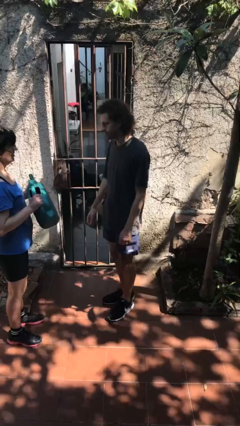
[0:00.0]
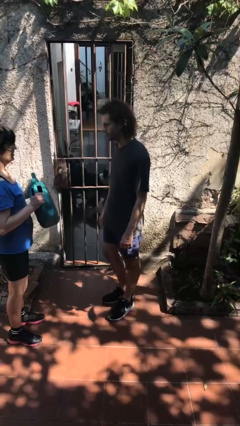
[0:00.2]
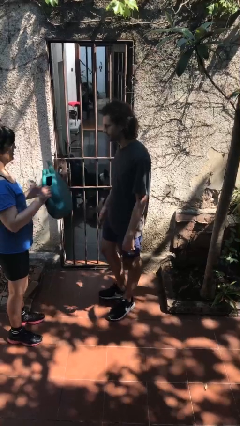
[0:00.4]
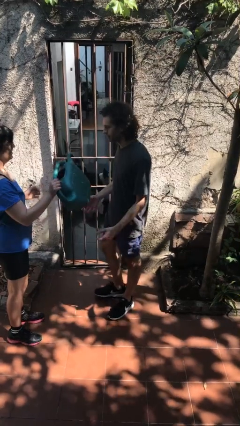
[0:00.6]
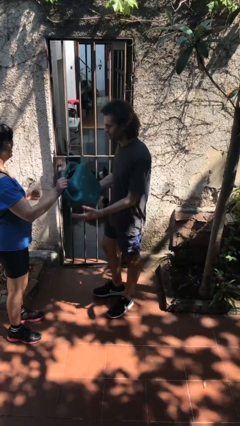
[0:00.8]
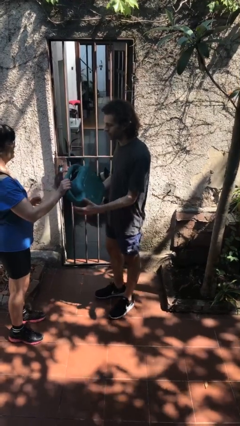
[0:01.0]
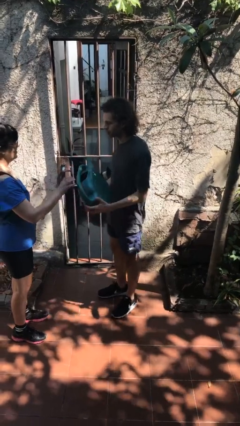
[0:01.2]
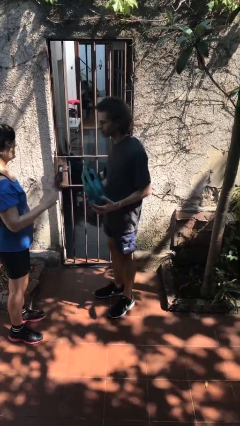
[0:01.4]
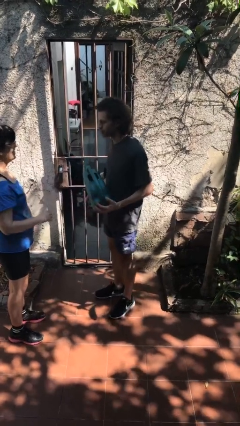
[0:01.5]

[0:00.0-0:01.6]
person transfers object to person

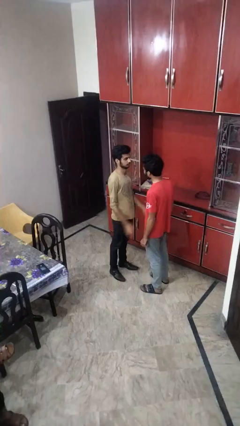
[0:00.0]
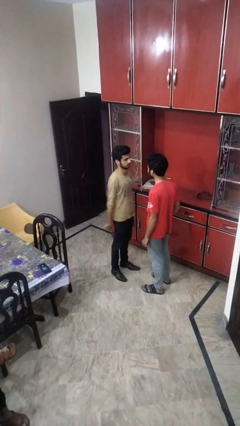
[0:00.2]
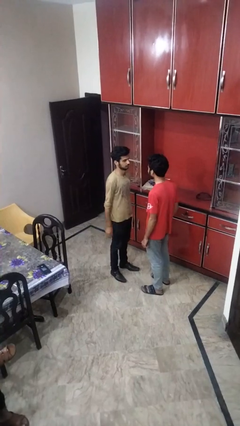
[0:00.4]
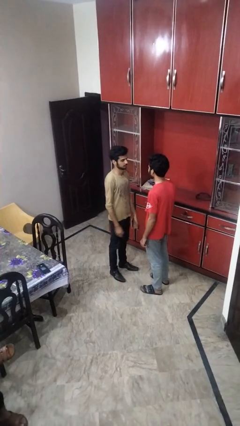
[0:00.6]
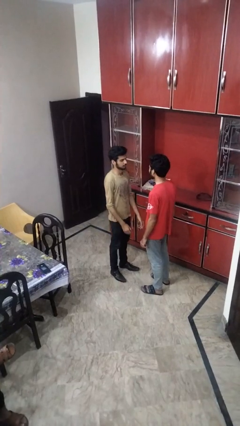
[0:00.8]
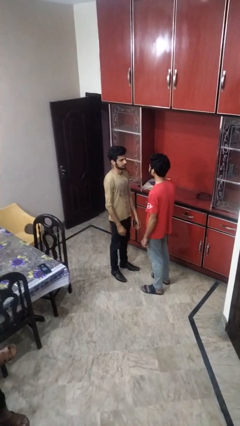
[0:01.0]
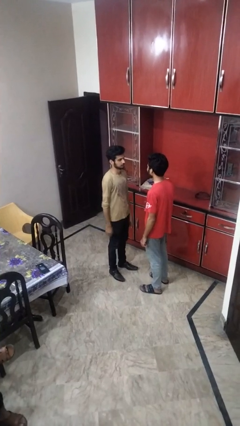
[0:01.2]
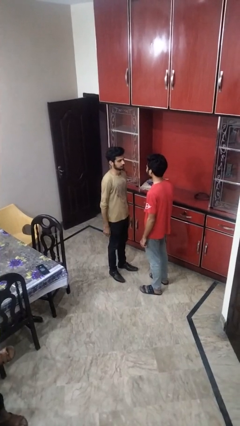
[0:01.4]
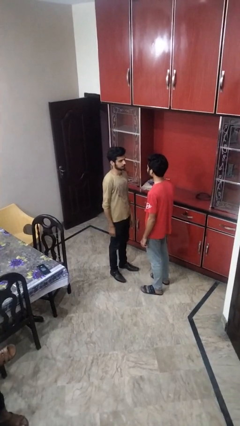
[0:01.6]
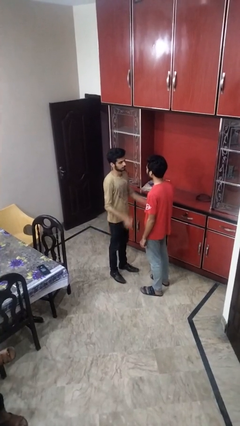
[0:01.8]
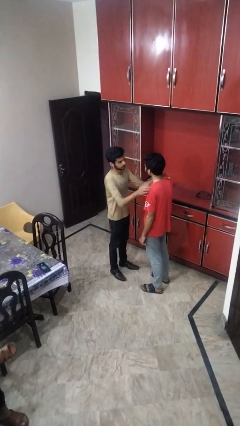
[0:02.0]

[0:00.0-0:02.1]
person shoves person

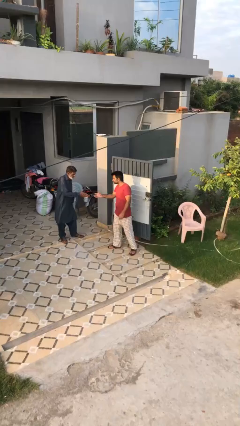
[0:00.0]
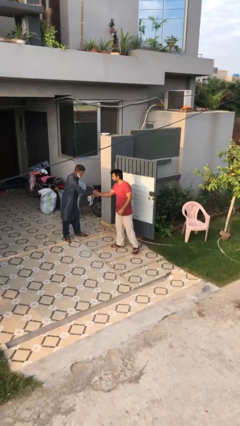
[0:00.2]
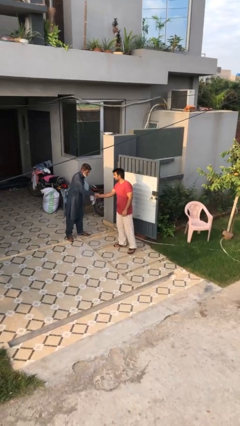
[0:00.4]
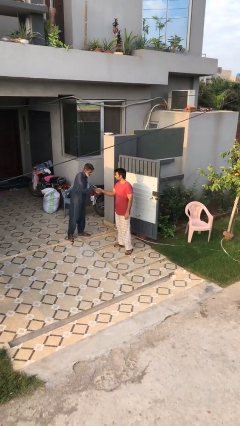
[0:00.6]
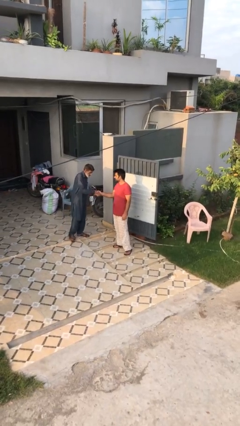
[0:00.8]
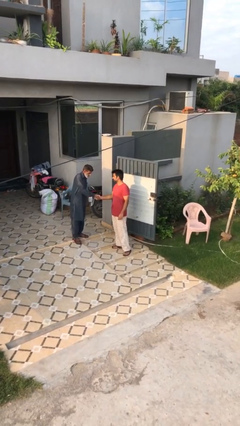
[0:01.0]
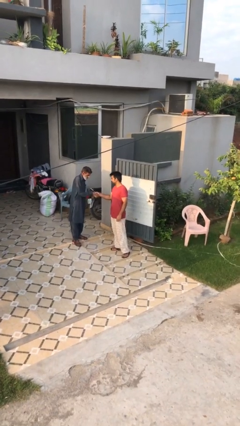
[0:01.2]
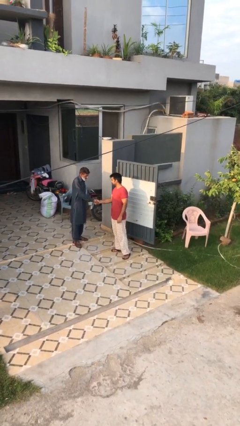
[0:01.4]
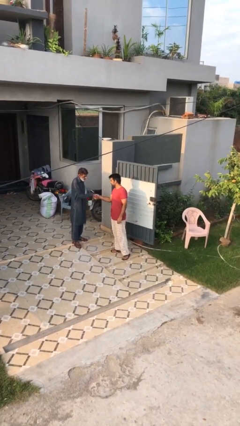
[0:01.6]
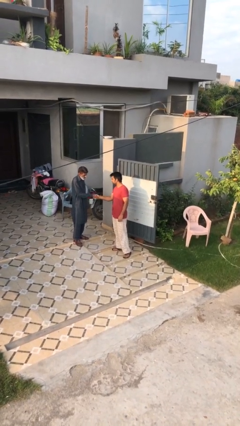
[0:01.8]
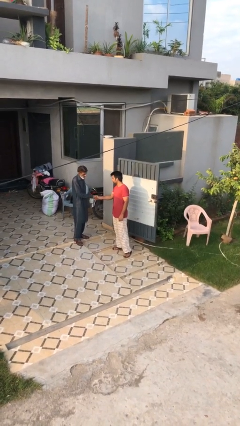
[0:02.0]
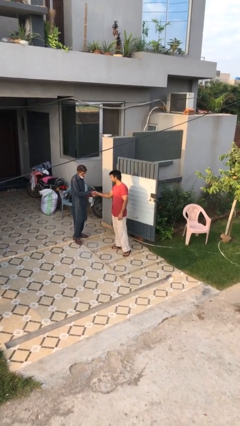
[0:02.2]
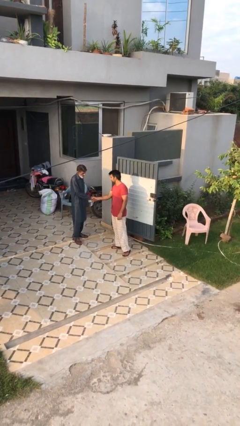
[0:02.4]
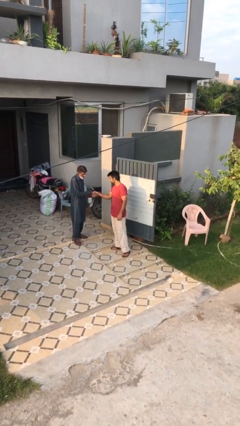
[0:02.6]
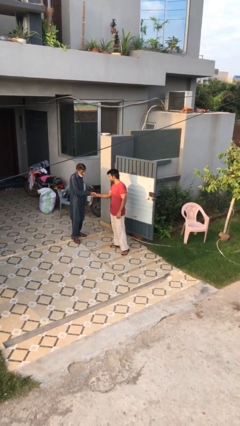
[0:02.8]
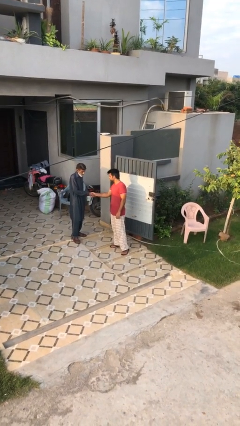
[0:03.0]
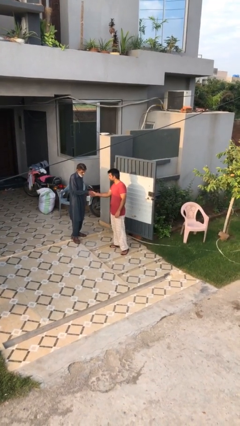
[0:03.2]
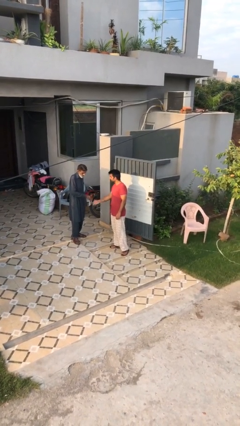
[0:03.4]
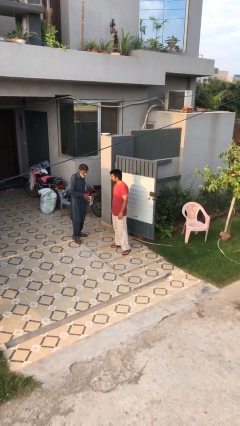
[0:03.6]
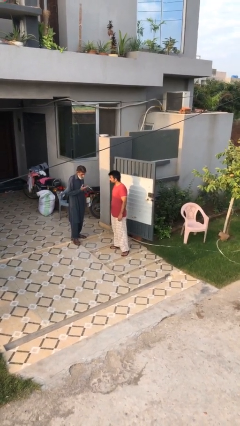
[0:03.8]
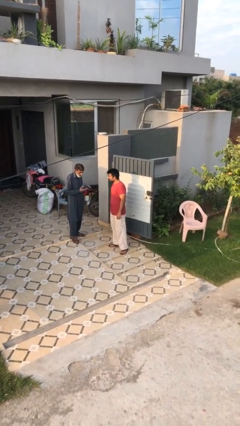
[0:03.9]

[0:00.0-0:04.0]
person shakes hand

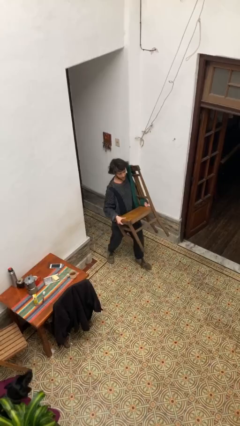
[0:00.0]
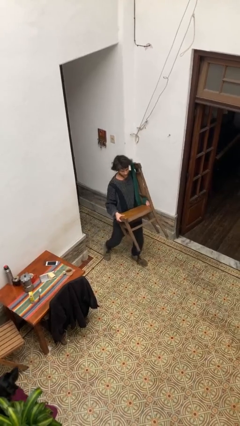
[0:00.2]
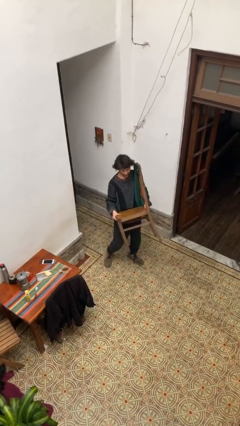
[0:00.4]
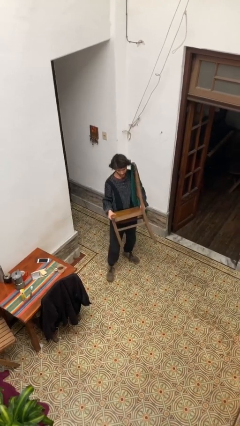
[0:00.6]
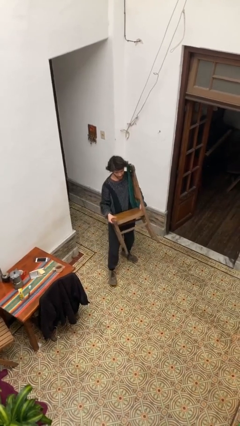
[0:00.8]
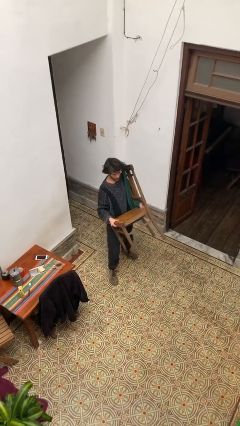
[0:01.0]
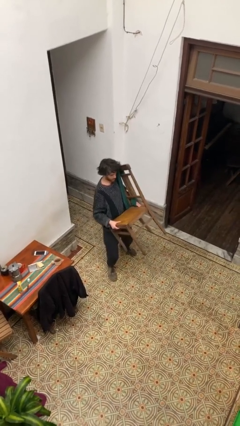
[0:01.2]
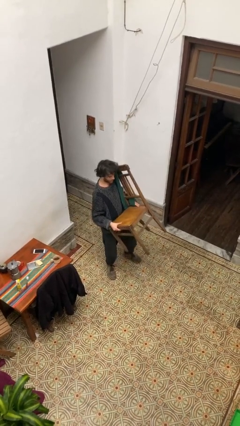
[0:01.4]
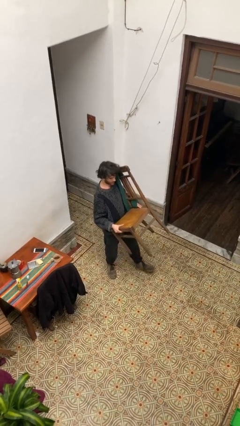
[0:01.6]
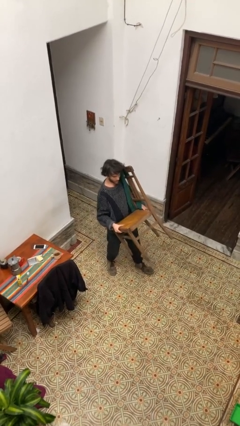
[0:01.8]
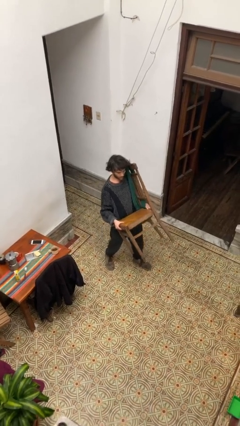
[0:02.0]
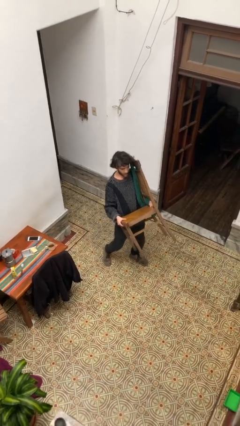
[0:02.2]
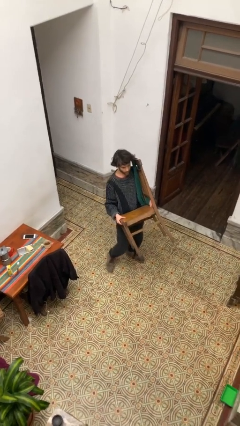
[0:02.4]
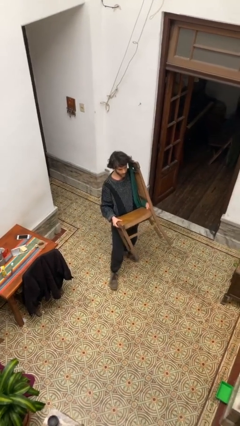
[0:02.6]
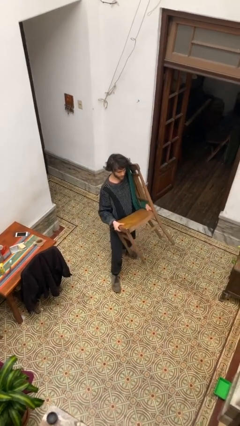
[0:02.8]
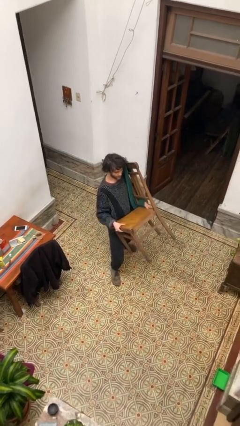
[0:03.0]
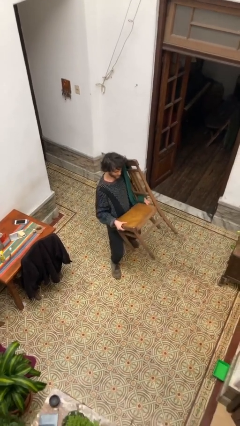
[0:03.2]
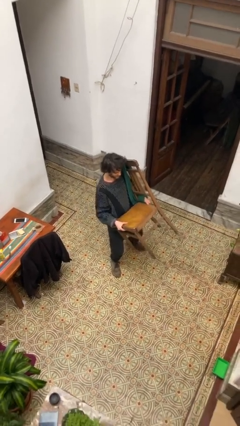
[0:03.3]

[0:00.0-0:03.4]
person carries heavy object

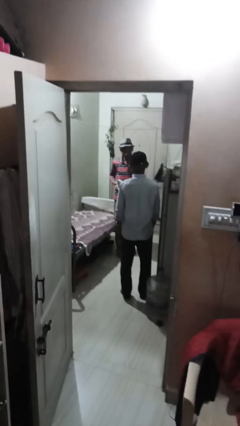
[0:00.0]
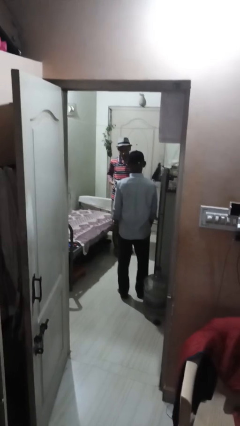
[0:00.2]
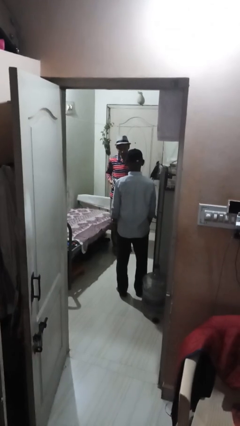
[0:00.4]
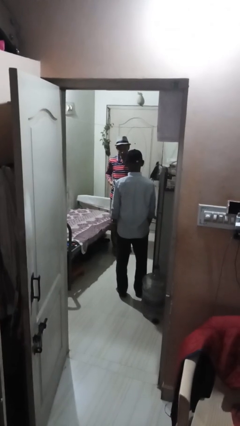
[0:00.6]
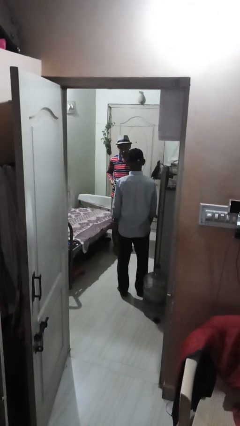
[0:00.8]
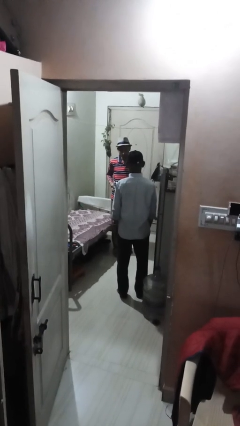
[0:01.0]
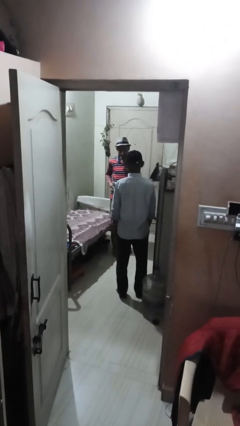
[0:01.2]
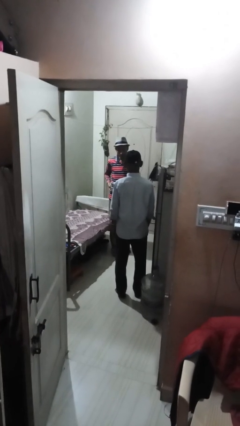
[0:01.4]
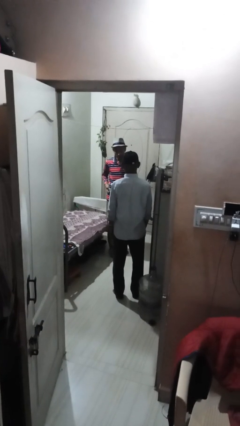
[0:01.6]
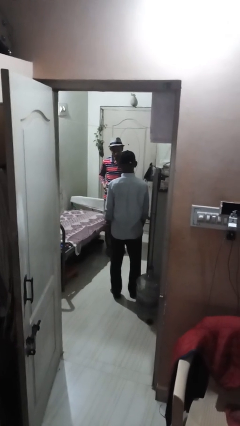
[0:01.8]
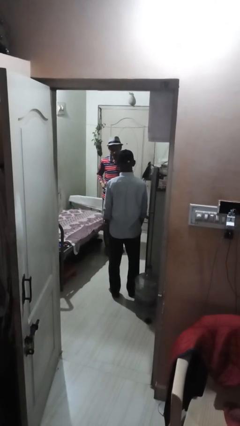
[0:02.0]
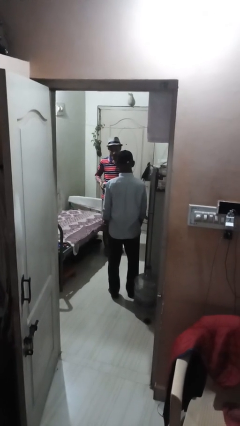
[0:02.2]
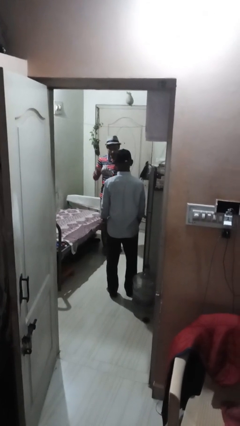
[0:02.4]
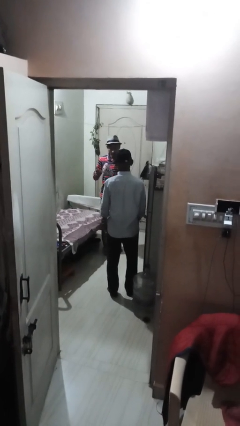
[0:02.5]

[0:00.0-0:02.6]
person throws object to person

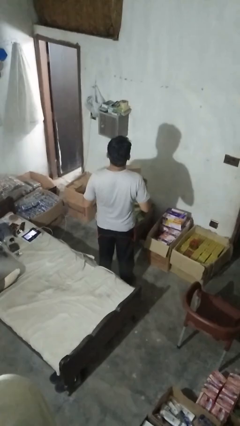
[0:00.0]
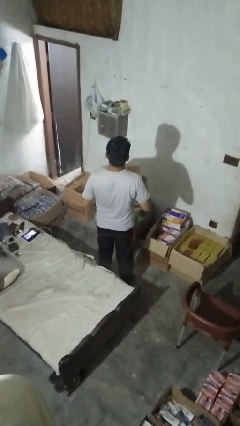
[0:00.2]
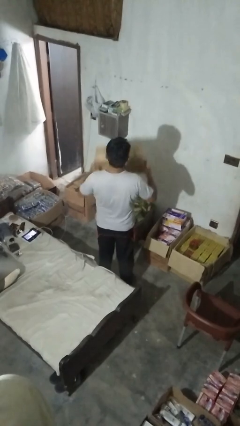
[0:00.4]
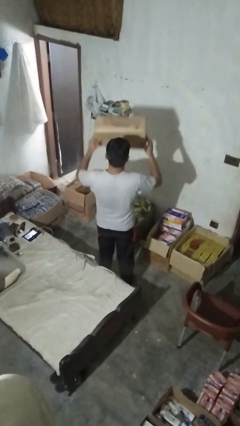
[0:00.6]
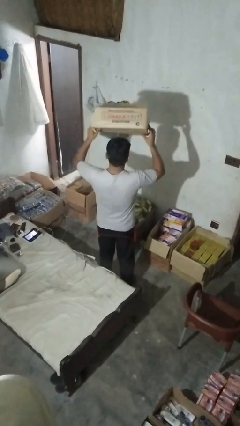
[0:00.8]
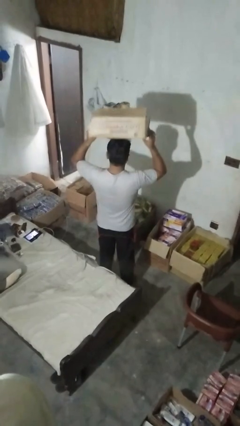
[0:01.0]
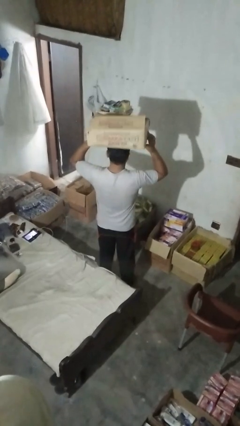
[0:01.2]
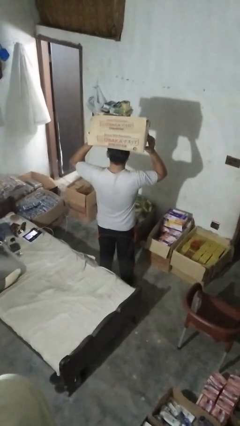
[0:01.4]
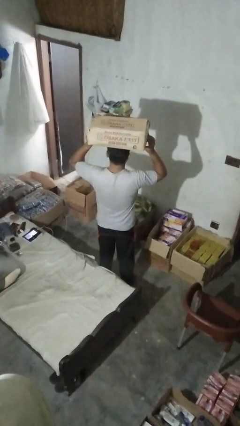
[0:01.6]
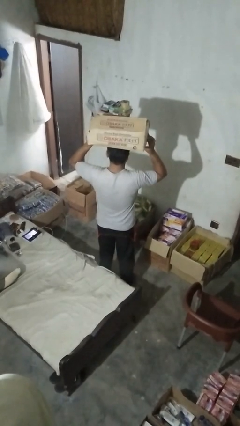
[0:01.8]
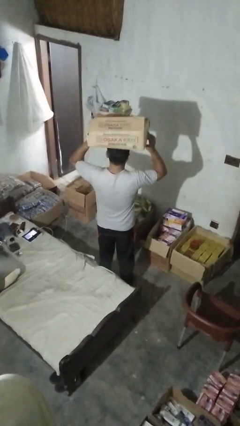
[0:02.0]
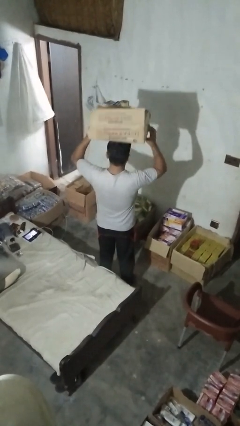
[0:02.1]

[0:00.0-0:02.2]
person holds object above head

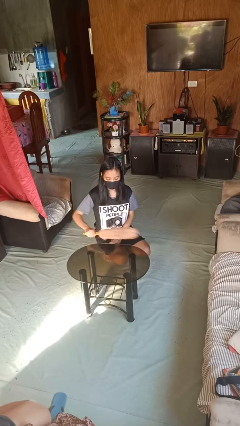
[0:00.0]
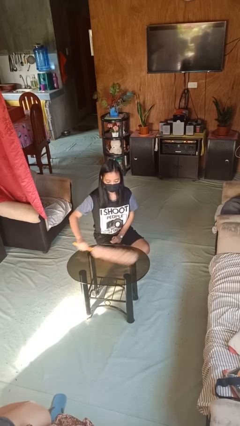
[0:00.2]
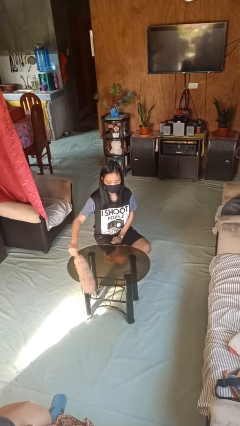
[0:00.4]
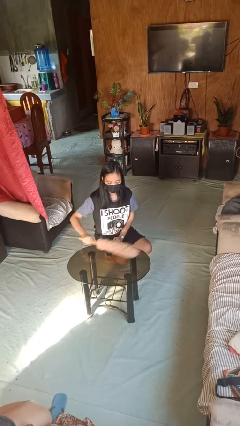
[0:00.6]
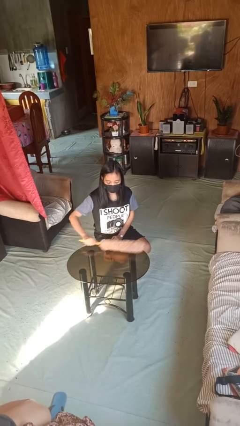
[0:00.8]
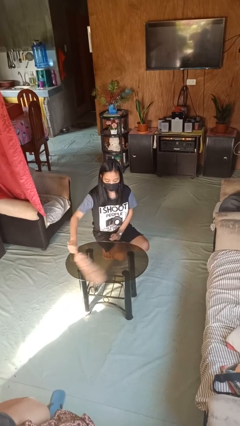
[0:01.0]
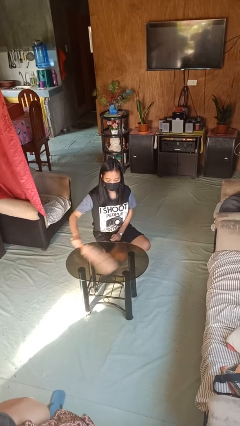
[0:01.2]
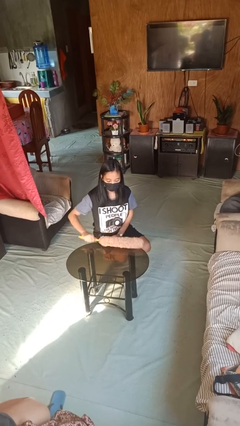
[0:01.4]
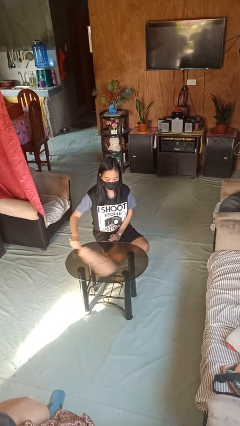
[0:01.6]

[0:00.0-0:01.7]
person dusts furniture
